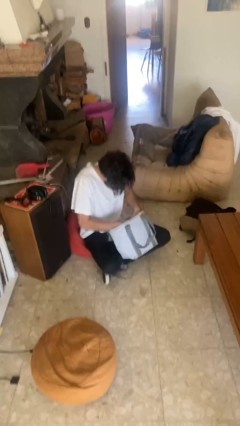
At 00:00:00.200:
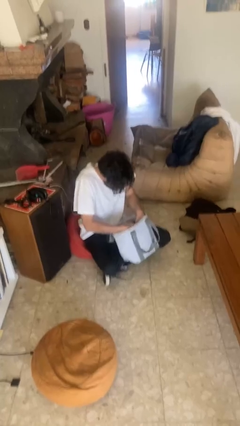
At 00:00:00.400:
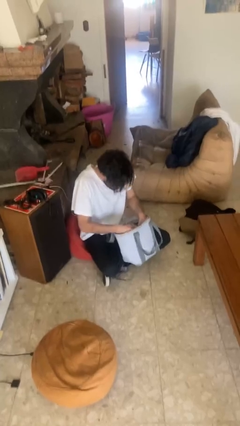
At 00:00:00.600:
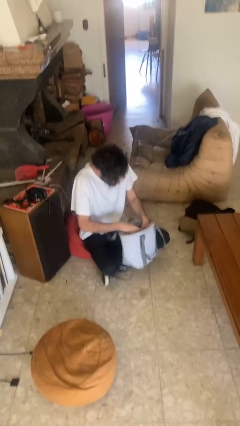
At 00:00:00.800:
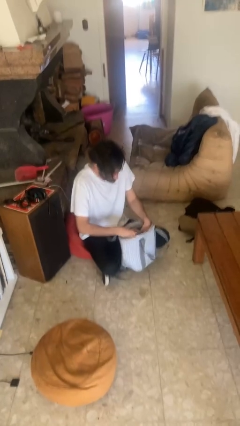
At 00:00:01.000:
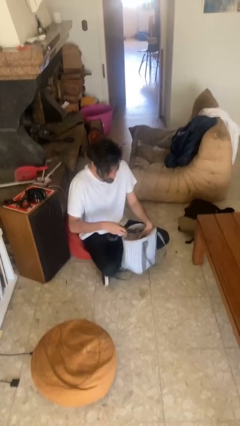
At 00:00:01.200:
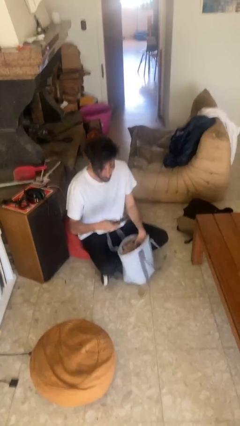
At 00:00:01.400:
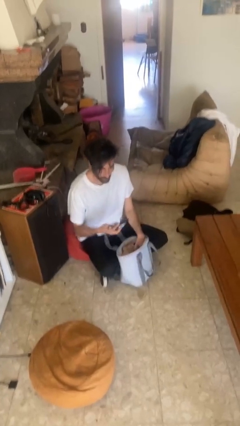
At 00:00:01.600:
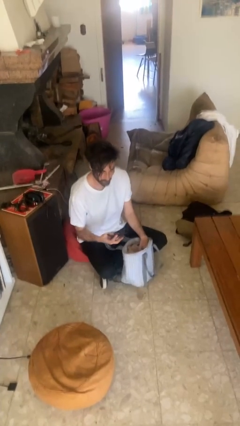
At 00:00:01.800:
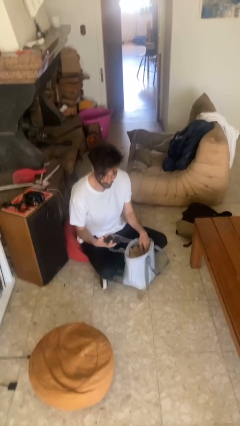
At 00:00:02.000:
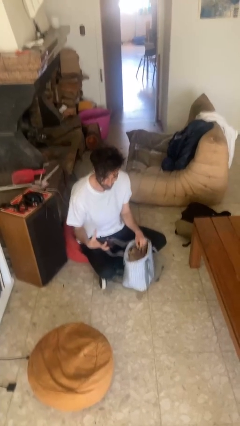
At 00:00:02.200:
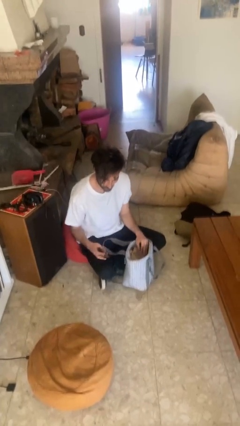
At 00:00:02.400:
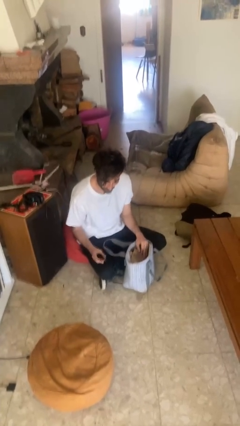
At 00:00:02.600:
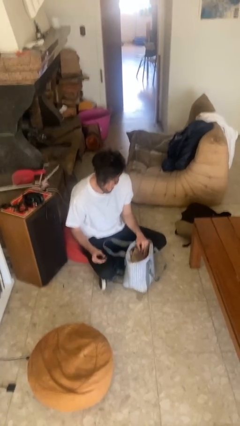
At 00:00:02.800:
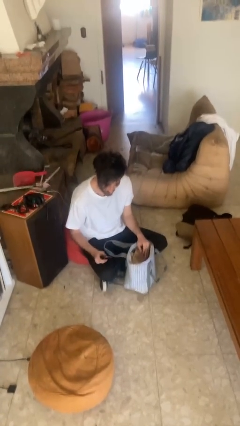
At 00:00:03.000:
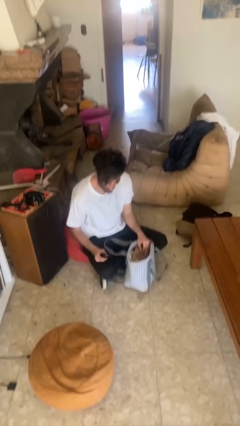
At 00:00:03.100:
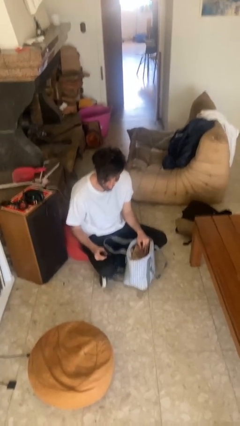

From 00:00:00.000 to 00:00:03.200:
person takes object from purse

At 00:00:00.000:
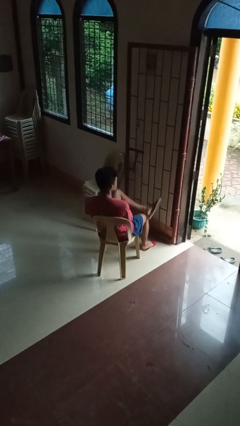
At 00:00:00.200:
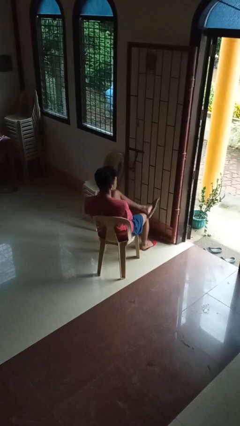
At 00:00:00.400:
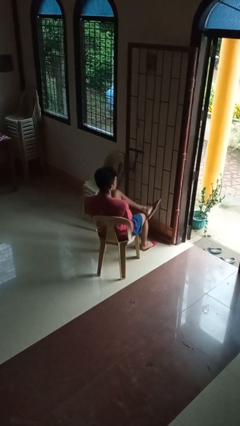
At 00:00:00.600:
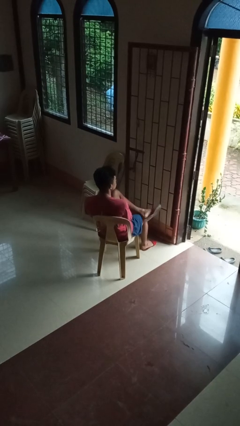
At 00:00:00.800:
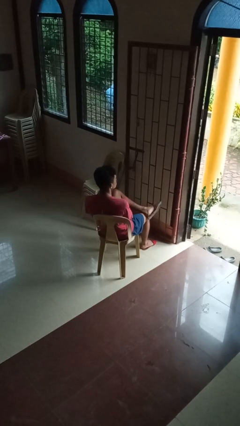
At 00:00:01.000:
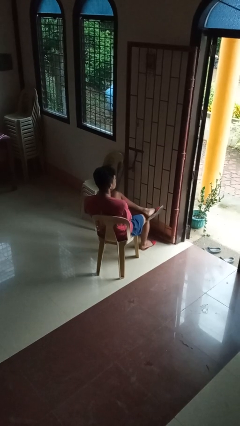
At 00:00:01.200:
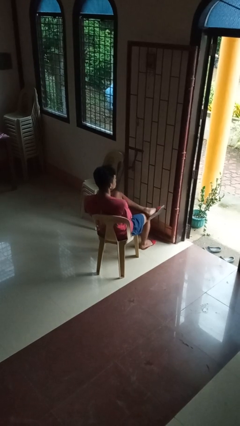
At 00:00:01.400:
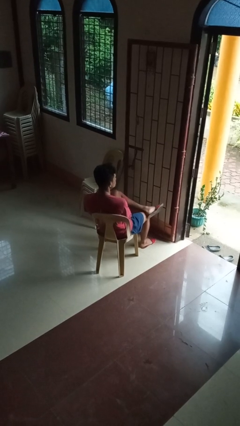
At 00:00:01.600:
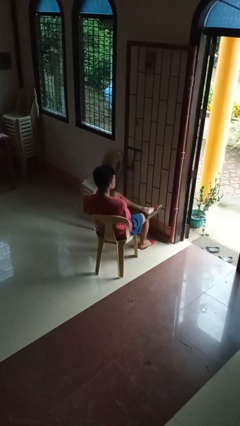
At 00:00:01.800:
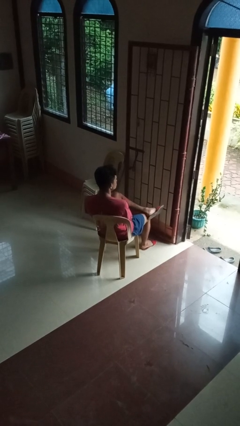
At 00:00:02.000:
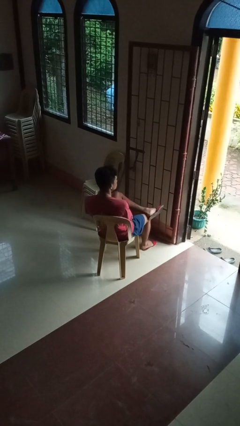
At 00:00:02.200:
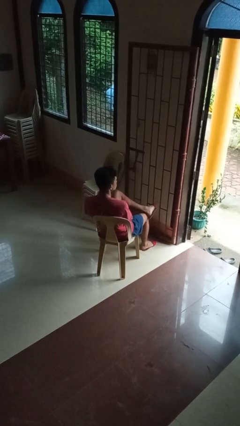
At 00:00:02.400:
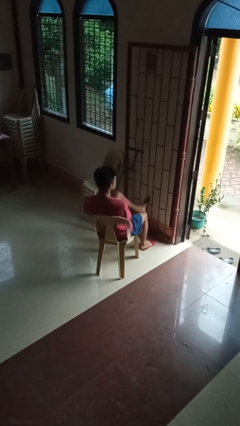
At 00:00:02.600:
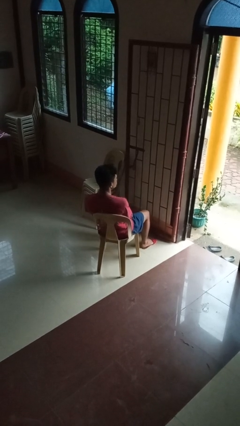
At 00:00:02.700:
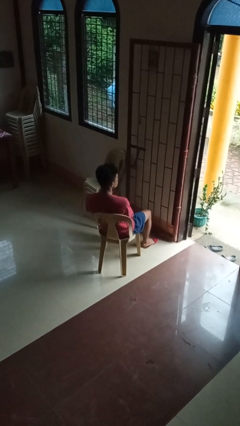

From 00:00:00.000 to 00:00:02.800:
person crosses legs

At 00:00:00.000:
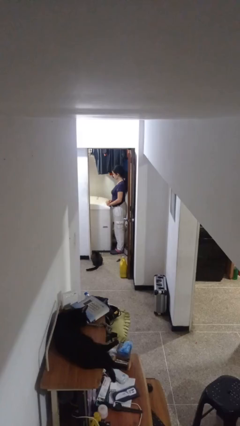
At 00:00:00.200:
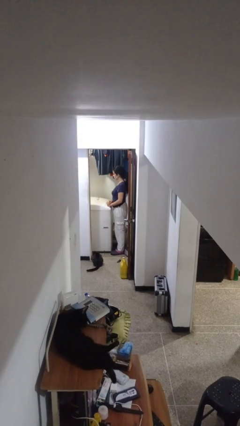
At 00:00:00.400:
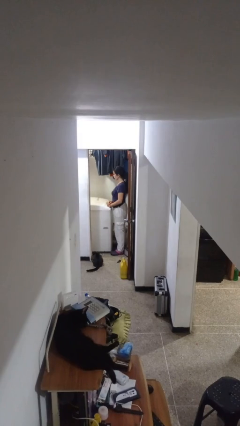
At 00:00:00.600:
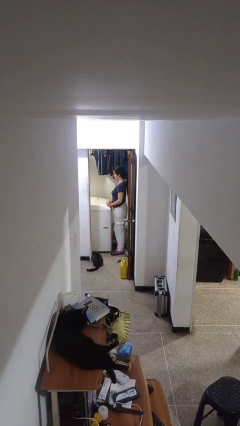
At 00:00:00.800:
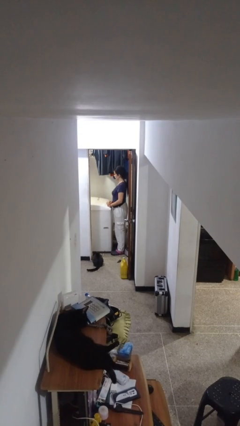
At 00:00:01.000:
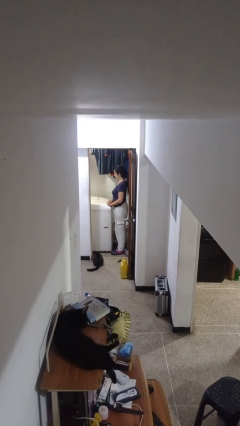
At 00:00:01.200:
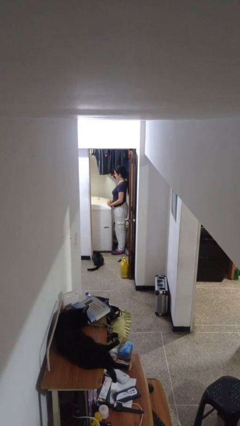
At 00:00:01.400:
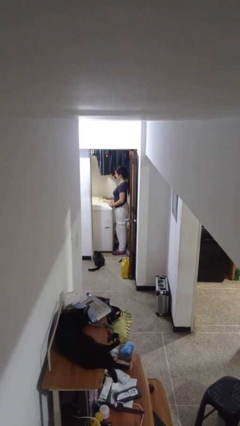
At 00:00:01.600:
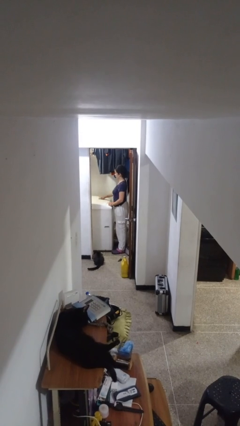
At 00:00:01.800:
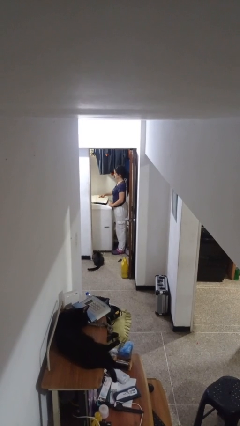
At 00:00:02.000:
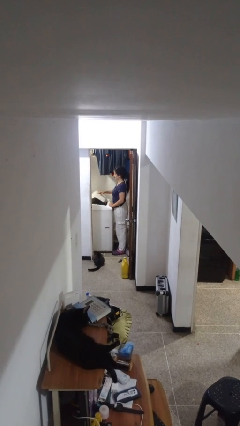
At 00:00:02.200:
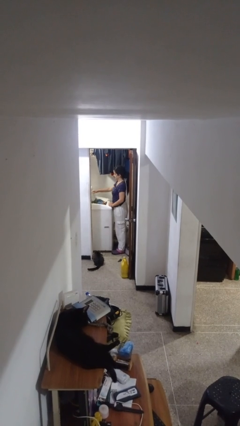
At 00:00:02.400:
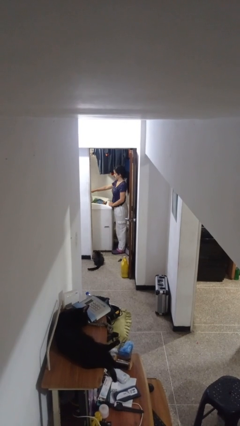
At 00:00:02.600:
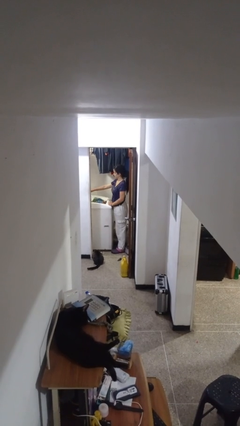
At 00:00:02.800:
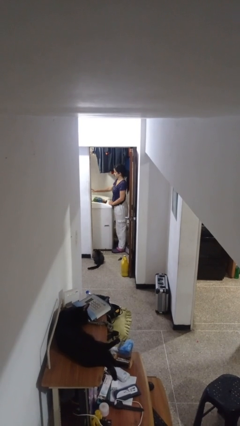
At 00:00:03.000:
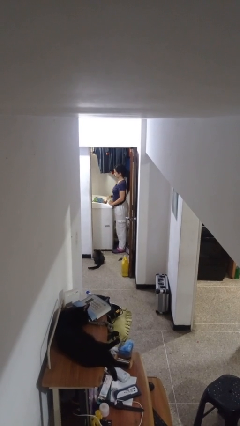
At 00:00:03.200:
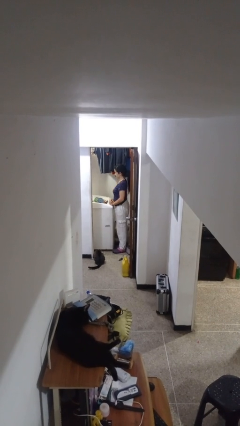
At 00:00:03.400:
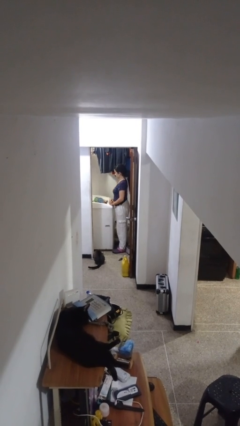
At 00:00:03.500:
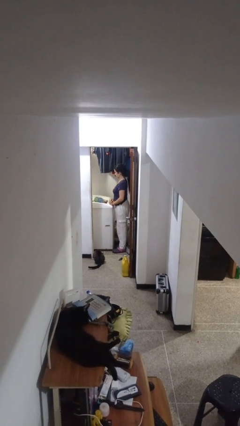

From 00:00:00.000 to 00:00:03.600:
person opens clothes washer

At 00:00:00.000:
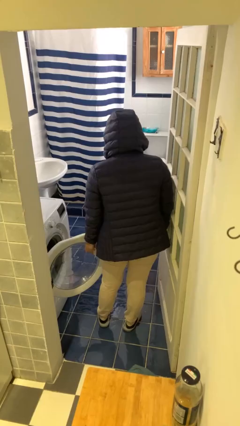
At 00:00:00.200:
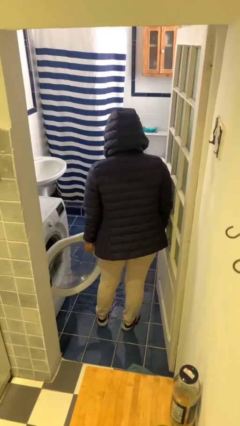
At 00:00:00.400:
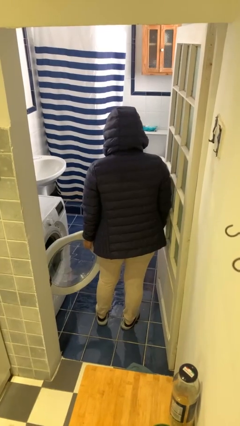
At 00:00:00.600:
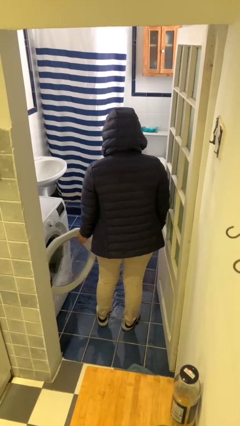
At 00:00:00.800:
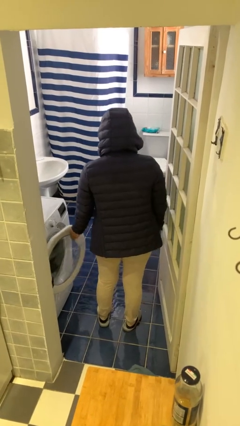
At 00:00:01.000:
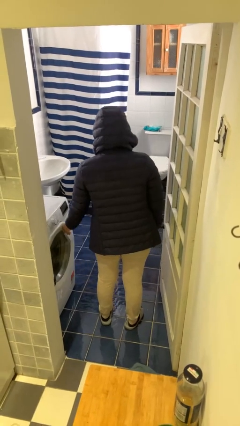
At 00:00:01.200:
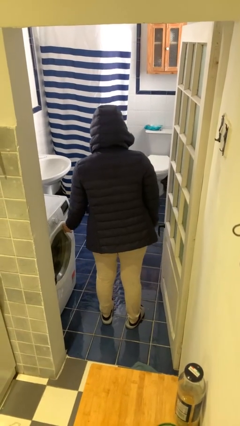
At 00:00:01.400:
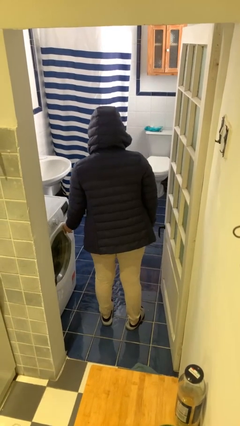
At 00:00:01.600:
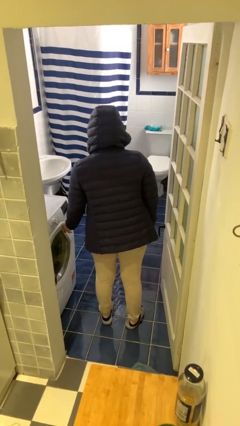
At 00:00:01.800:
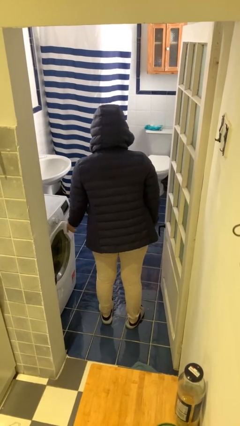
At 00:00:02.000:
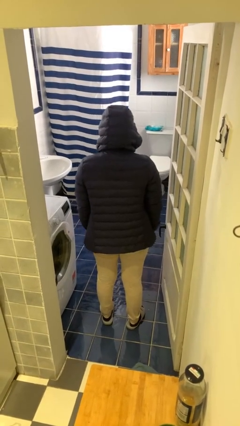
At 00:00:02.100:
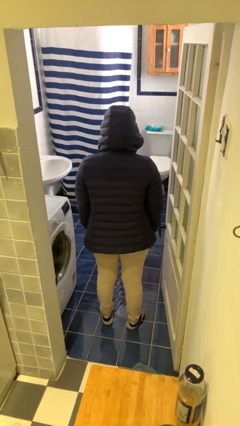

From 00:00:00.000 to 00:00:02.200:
person closes clothes washer

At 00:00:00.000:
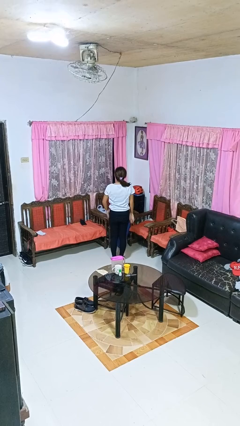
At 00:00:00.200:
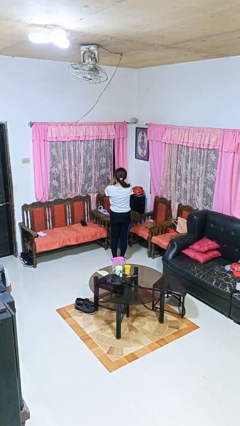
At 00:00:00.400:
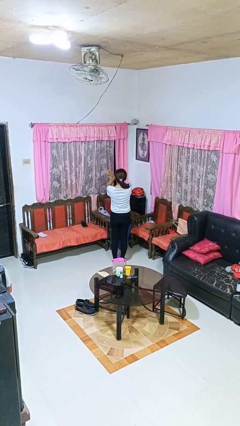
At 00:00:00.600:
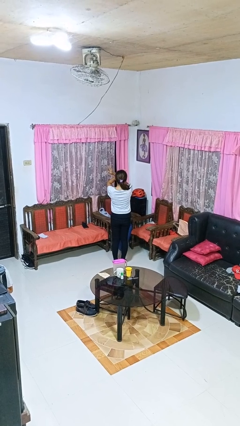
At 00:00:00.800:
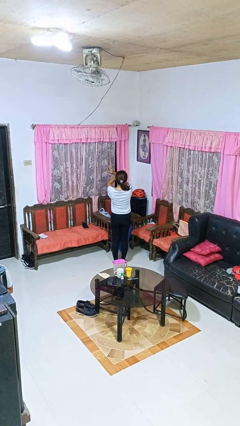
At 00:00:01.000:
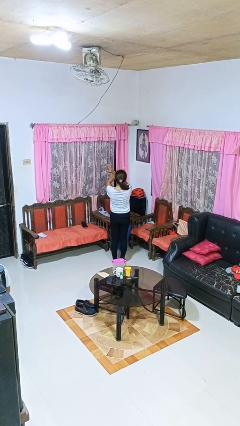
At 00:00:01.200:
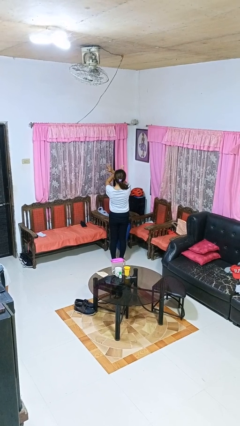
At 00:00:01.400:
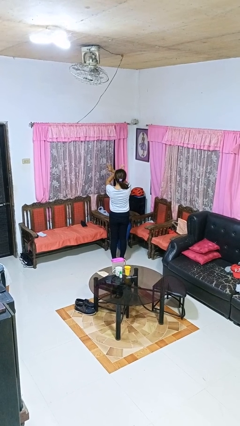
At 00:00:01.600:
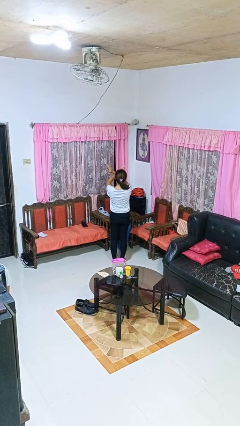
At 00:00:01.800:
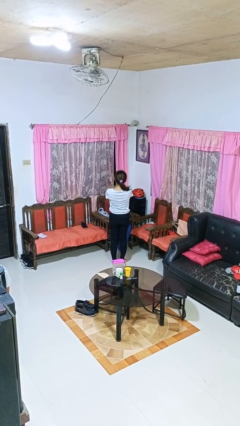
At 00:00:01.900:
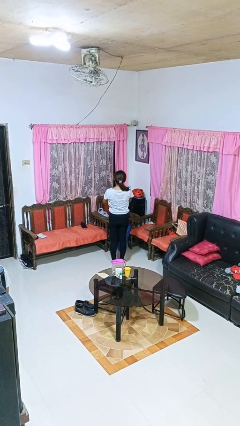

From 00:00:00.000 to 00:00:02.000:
person gestures arms x

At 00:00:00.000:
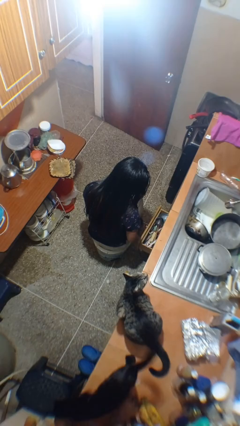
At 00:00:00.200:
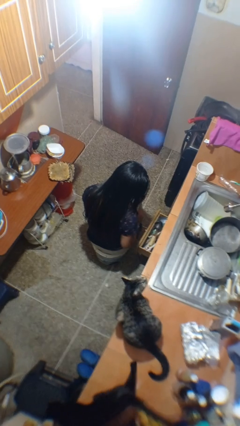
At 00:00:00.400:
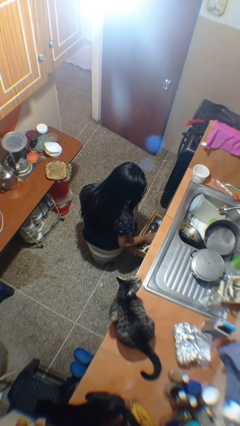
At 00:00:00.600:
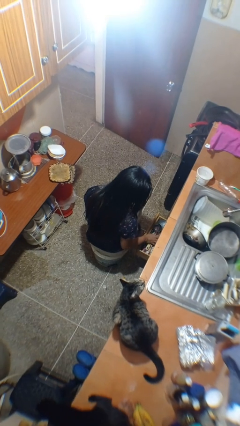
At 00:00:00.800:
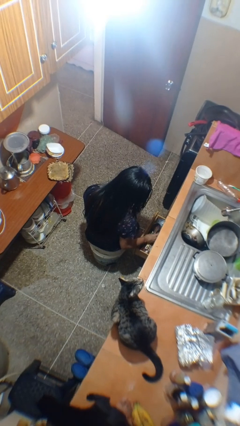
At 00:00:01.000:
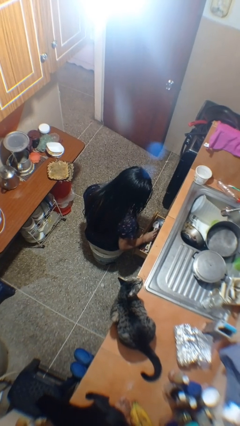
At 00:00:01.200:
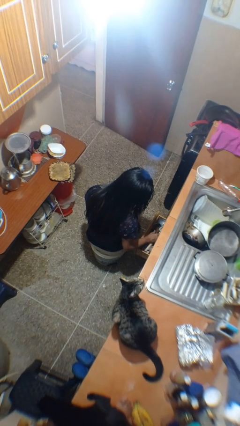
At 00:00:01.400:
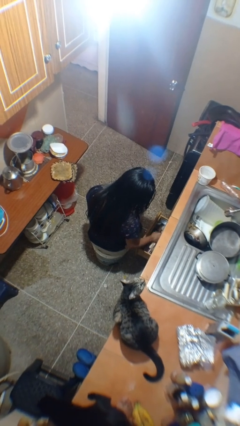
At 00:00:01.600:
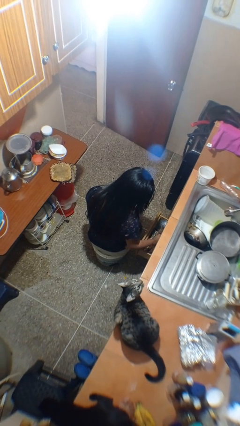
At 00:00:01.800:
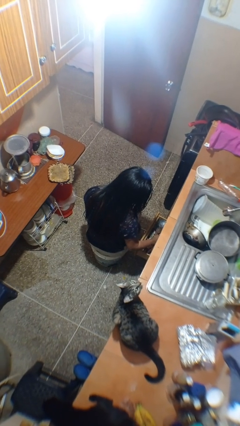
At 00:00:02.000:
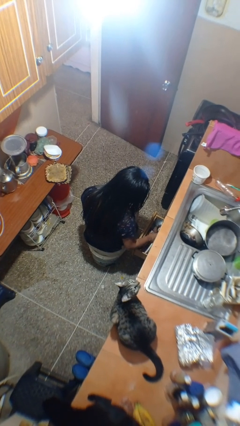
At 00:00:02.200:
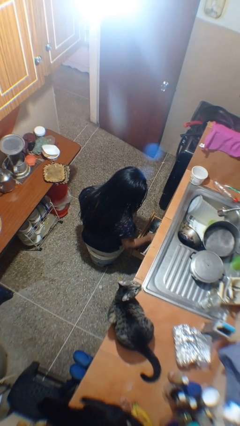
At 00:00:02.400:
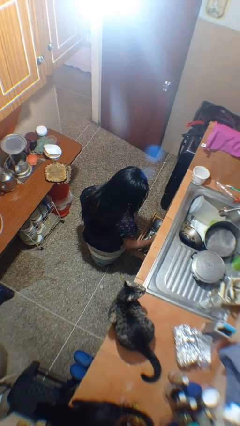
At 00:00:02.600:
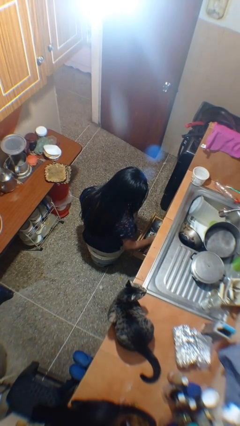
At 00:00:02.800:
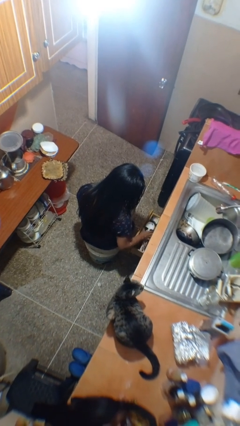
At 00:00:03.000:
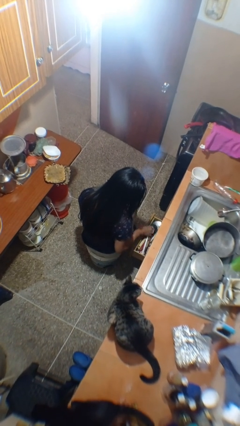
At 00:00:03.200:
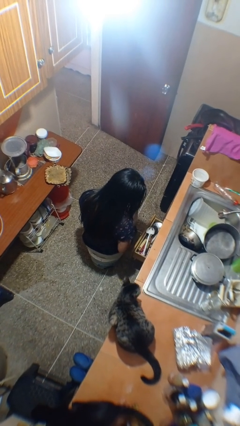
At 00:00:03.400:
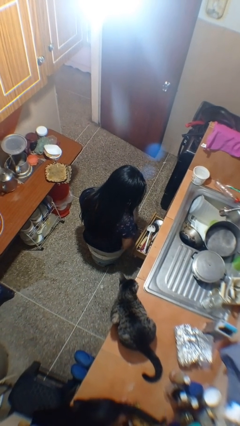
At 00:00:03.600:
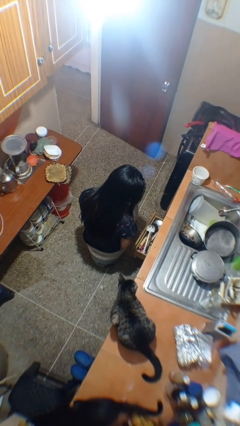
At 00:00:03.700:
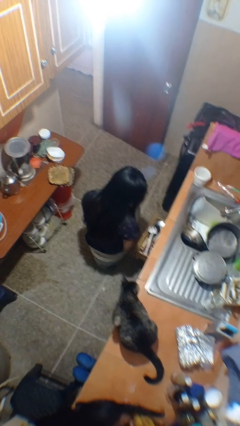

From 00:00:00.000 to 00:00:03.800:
person searches in kitchen drawer
